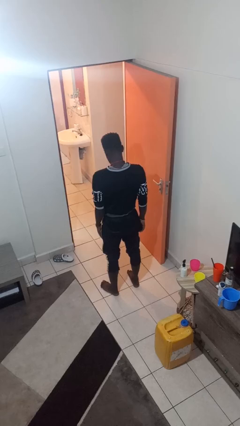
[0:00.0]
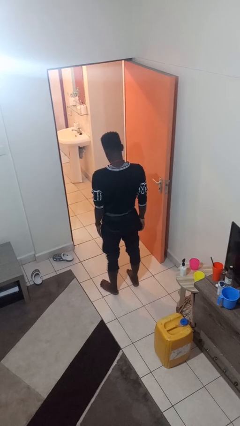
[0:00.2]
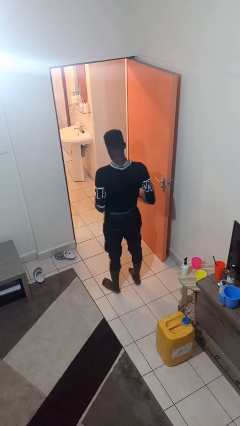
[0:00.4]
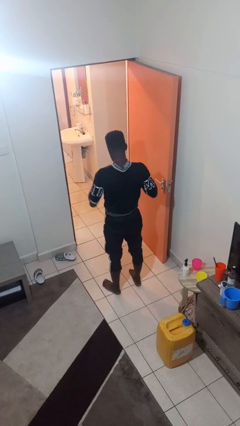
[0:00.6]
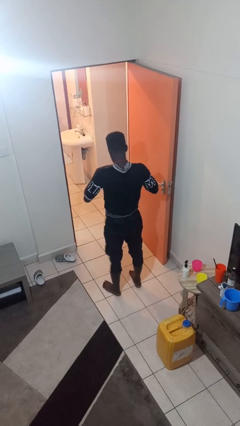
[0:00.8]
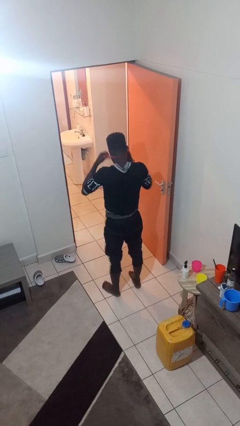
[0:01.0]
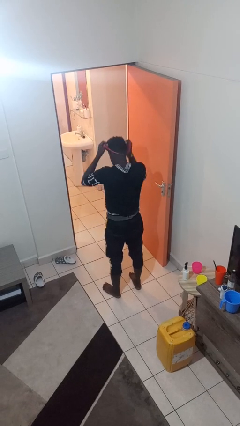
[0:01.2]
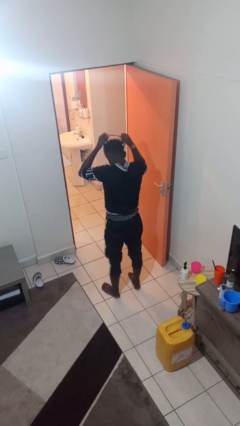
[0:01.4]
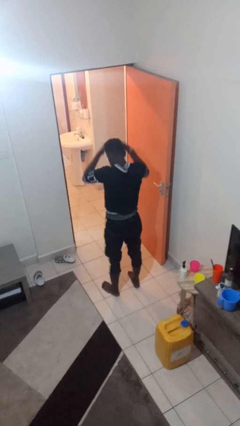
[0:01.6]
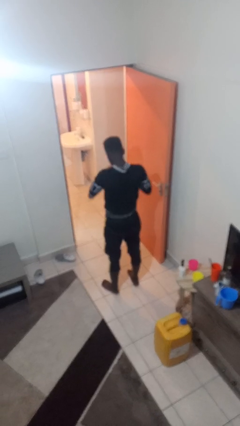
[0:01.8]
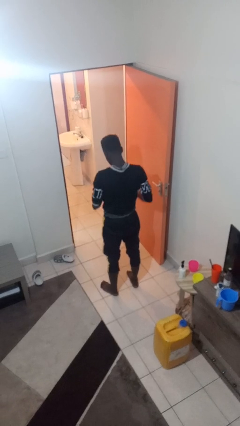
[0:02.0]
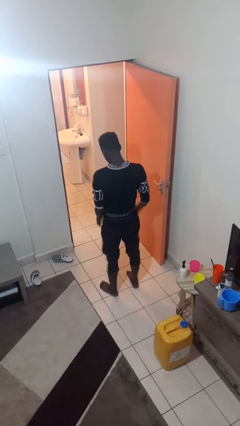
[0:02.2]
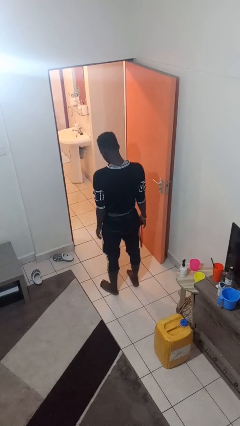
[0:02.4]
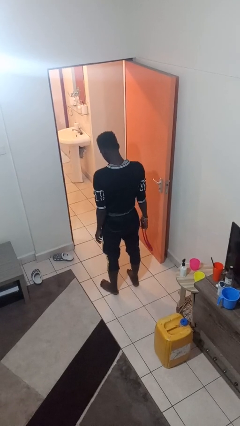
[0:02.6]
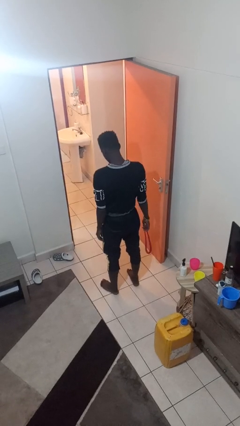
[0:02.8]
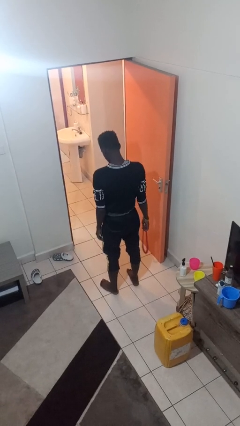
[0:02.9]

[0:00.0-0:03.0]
person takes off necklace

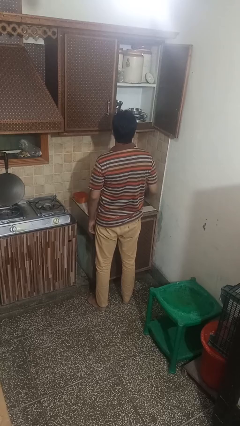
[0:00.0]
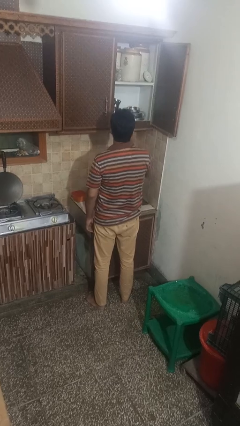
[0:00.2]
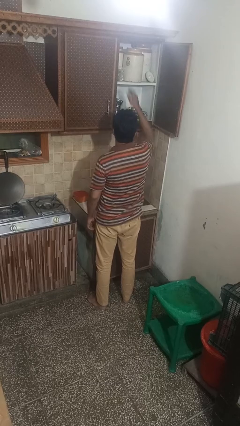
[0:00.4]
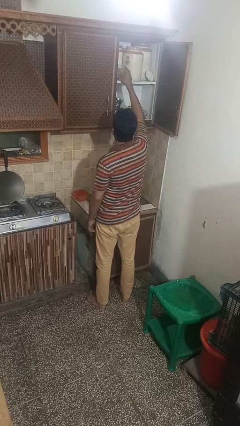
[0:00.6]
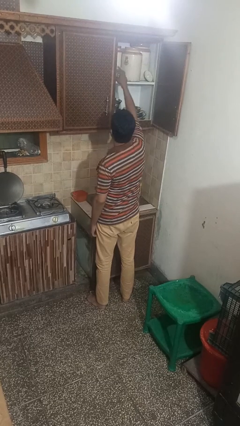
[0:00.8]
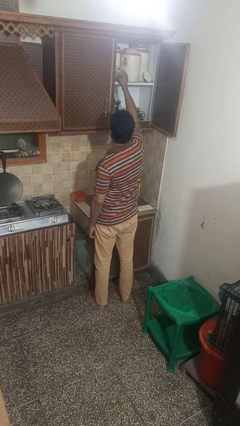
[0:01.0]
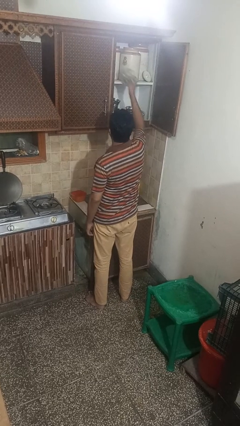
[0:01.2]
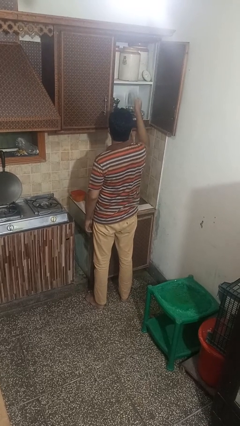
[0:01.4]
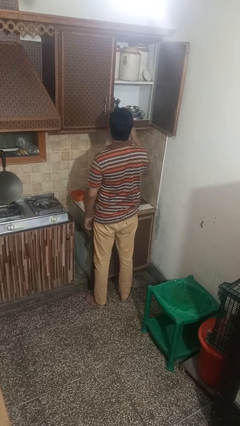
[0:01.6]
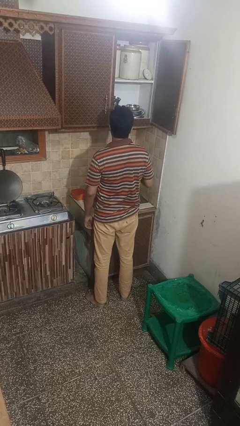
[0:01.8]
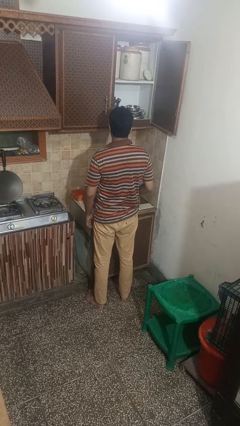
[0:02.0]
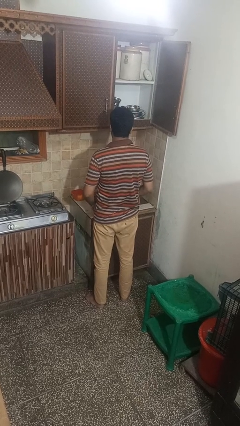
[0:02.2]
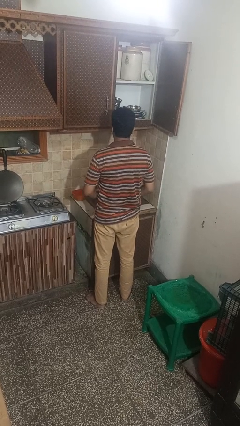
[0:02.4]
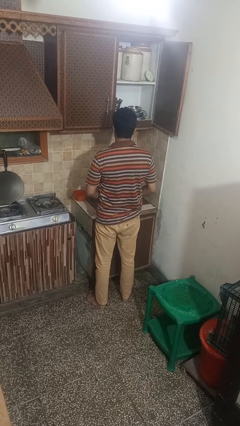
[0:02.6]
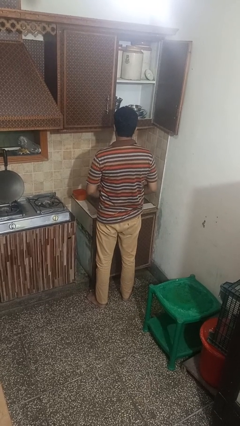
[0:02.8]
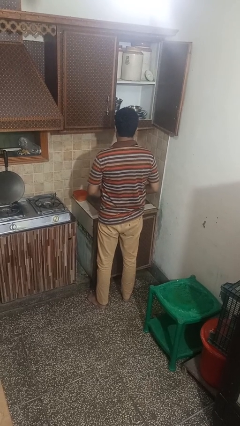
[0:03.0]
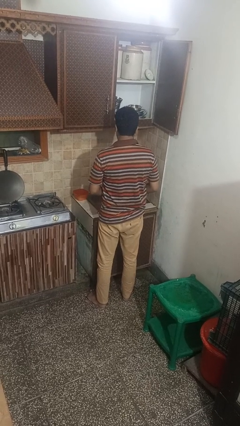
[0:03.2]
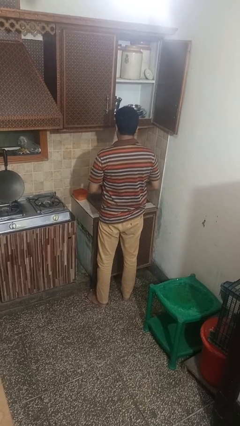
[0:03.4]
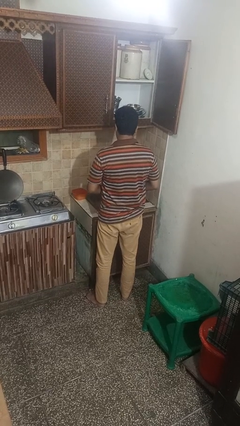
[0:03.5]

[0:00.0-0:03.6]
person takes object from cabinet

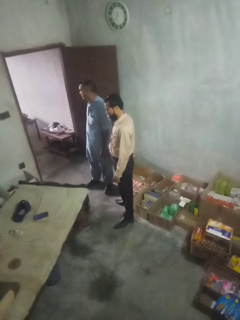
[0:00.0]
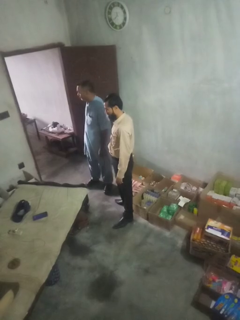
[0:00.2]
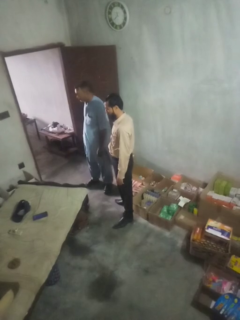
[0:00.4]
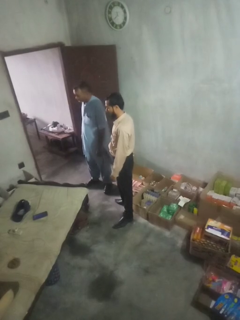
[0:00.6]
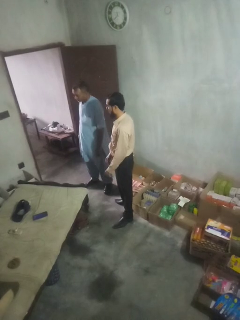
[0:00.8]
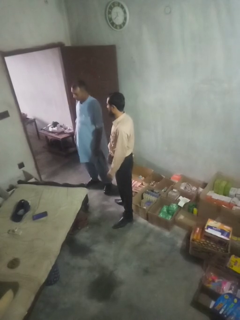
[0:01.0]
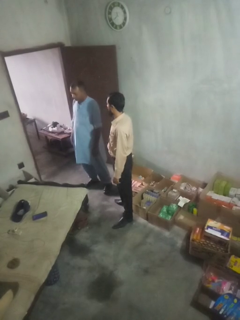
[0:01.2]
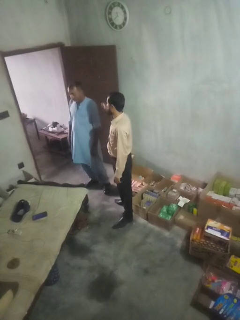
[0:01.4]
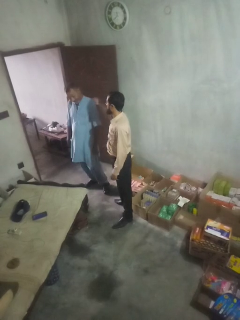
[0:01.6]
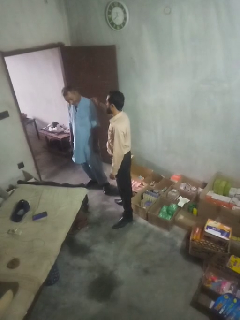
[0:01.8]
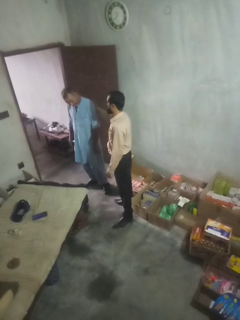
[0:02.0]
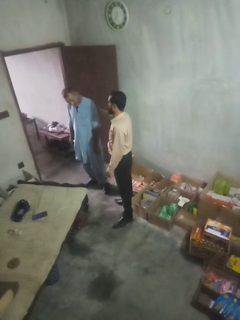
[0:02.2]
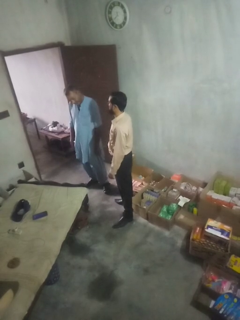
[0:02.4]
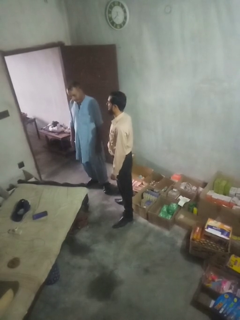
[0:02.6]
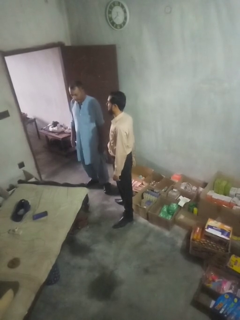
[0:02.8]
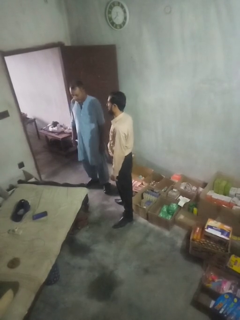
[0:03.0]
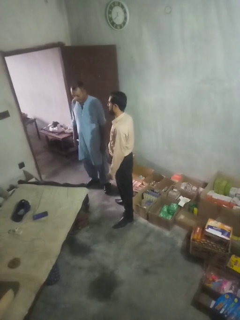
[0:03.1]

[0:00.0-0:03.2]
person touches back of person

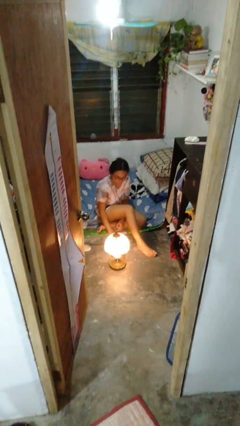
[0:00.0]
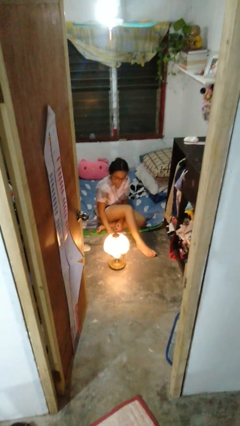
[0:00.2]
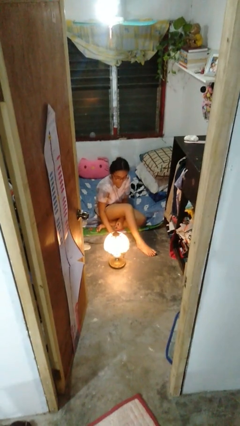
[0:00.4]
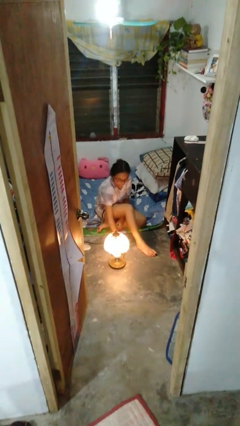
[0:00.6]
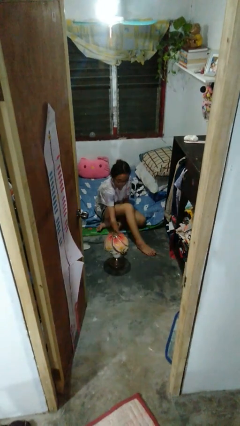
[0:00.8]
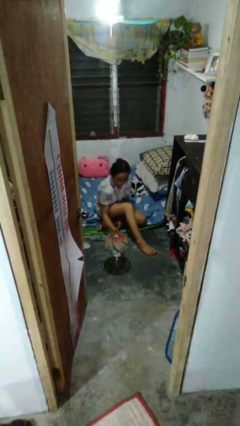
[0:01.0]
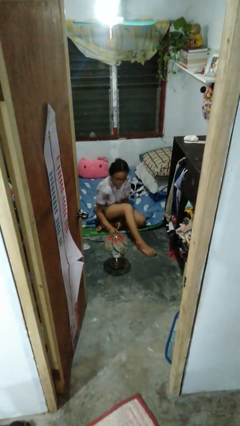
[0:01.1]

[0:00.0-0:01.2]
person turns off lamp

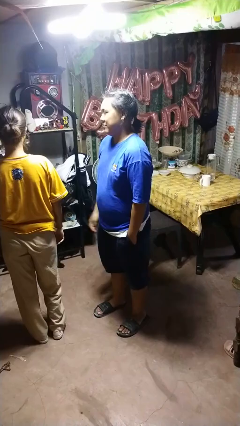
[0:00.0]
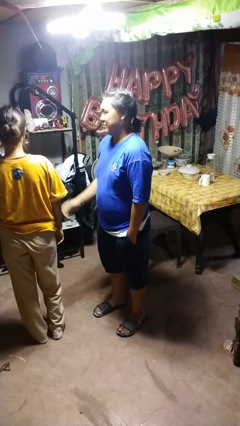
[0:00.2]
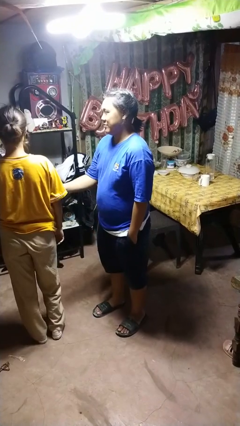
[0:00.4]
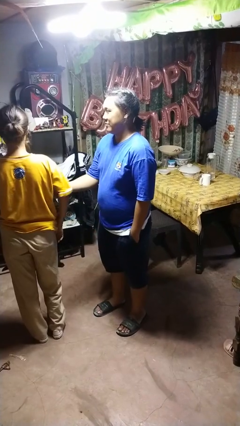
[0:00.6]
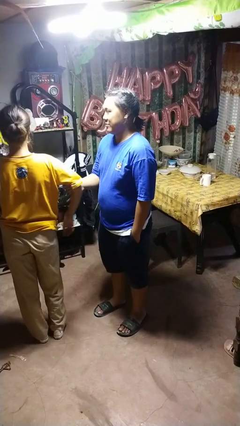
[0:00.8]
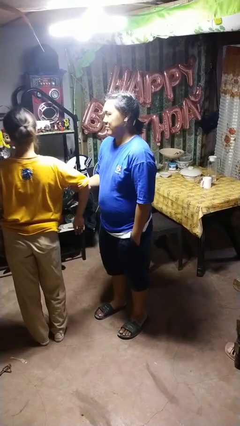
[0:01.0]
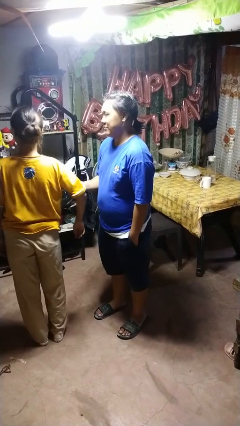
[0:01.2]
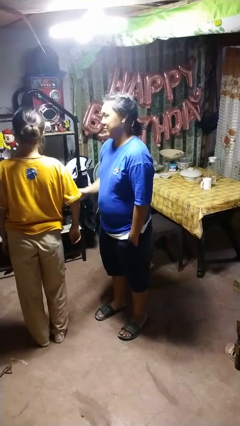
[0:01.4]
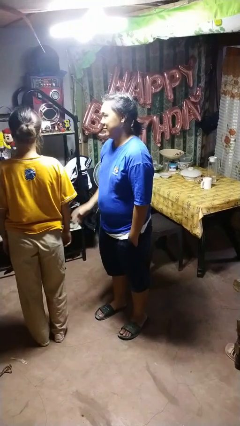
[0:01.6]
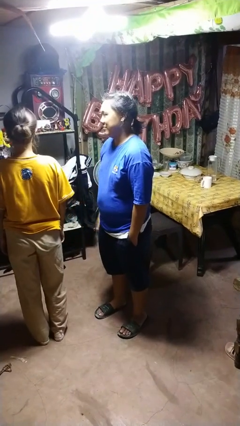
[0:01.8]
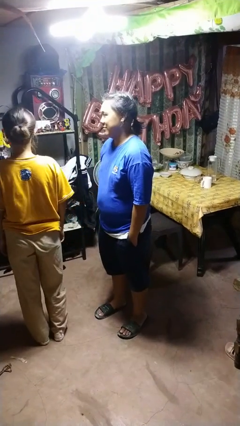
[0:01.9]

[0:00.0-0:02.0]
person grabs person by bicep

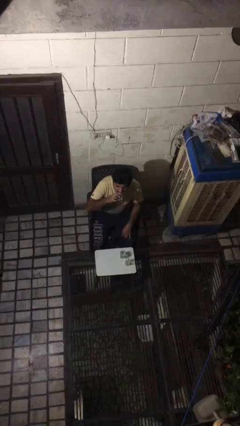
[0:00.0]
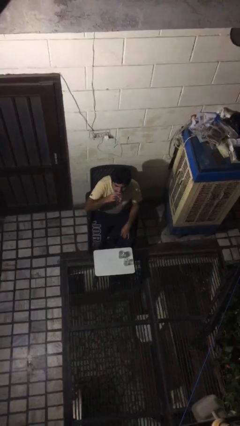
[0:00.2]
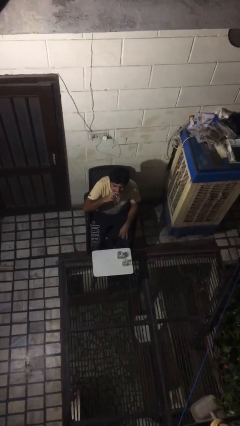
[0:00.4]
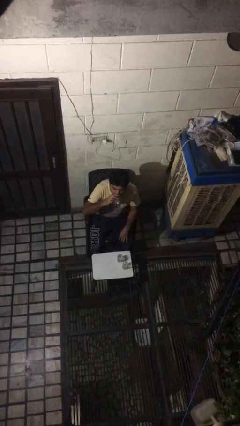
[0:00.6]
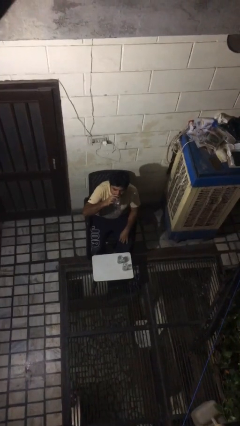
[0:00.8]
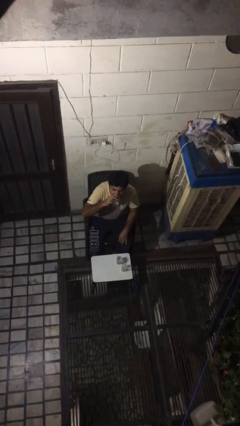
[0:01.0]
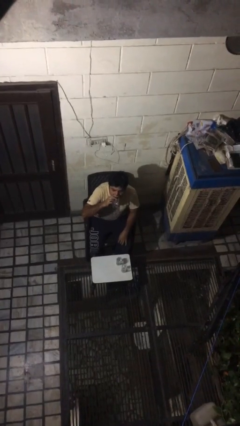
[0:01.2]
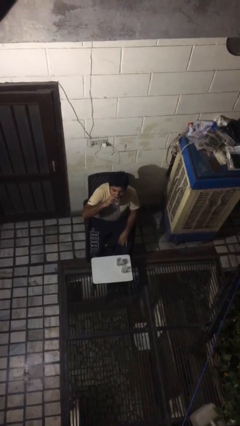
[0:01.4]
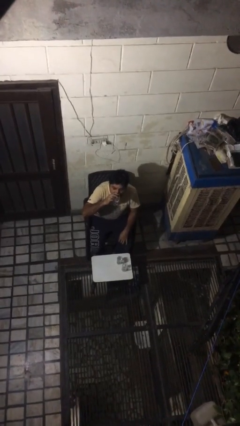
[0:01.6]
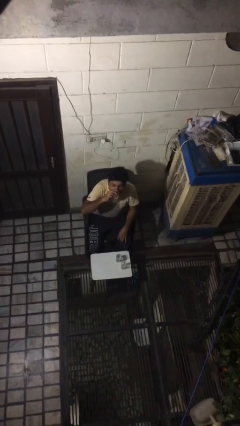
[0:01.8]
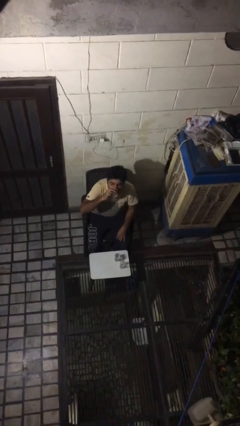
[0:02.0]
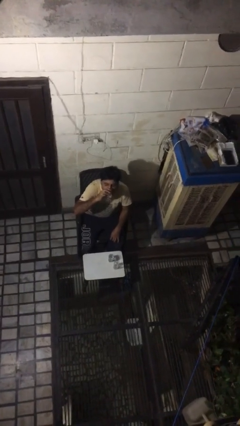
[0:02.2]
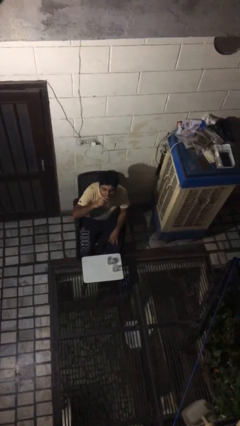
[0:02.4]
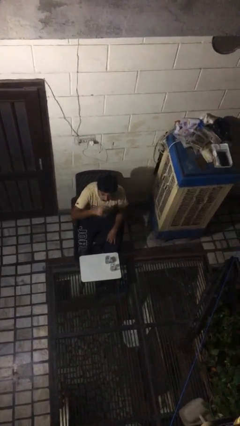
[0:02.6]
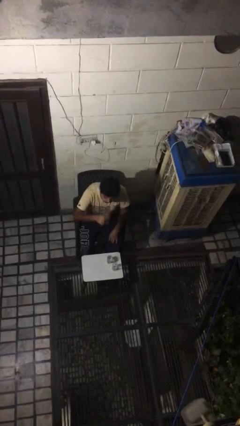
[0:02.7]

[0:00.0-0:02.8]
person drinks from shotglass

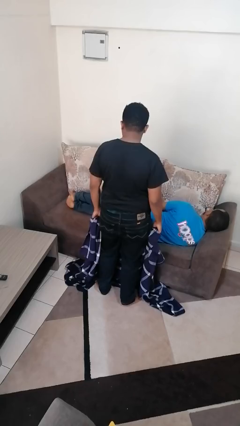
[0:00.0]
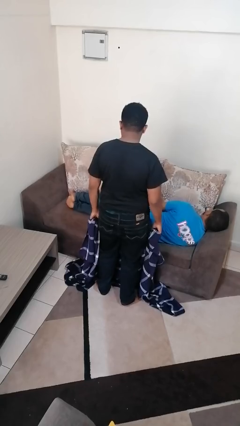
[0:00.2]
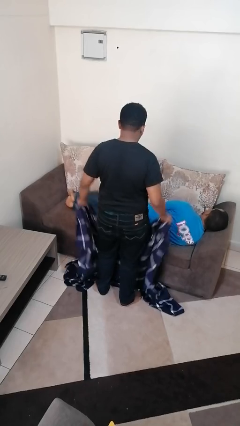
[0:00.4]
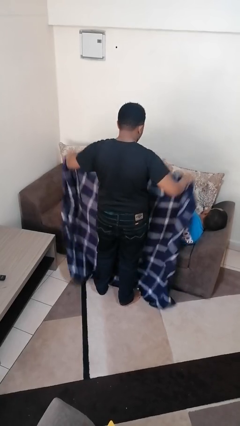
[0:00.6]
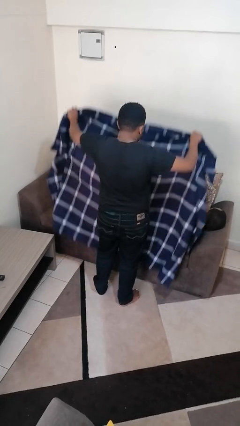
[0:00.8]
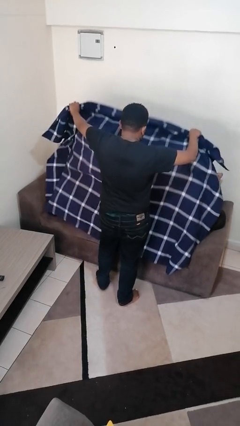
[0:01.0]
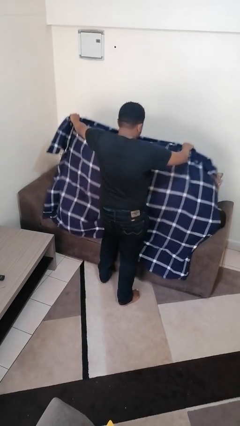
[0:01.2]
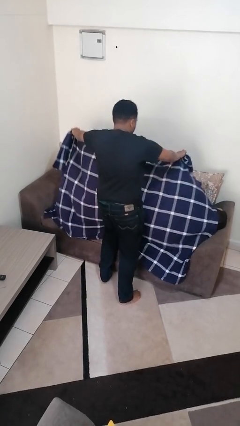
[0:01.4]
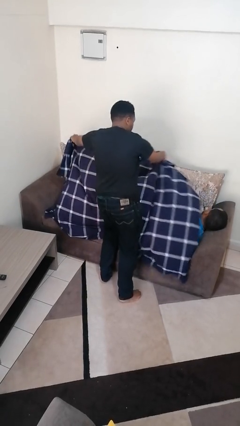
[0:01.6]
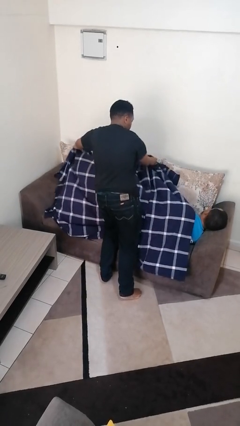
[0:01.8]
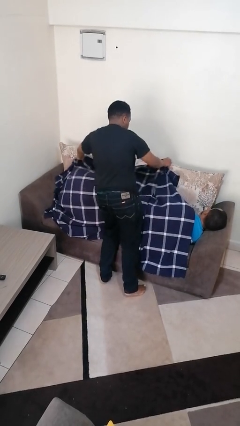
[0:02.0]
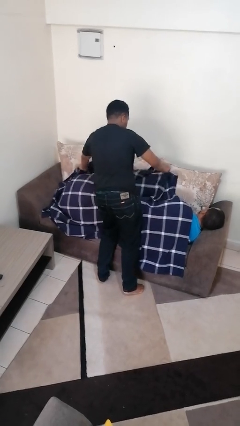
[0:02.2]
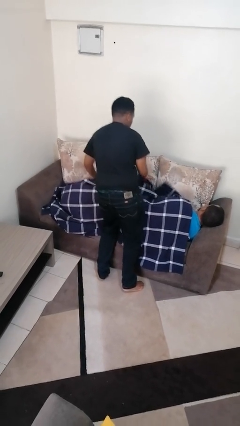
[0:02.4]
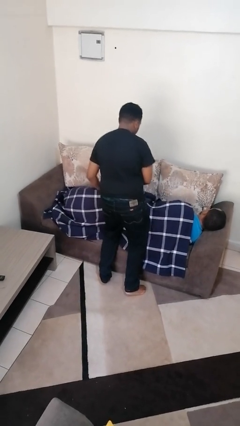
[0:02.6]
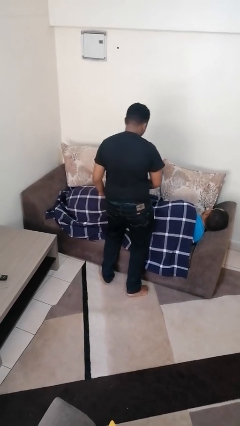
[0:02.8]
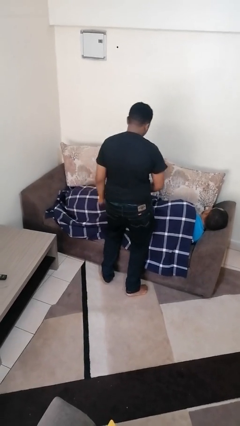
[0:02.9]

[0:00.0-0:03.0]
person covers friend with blanket
